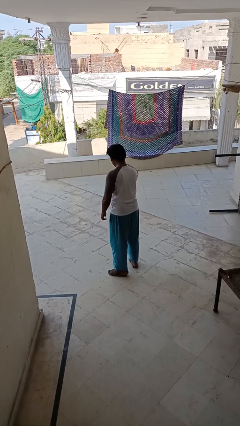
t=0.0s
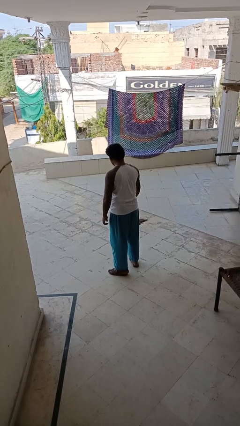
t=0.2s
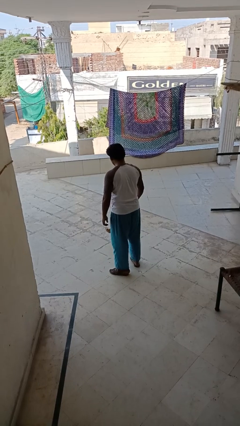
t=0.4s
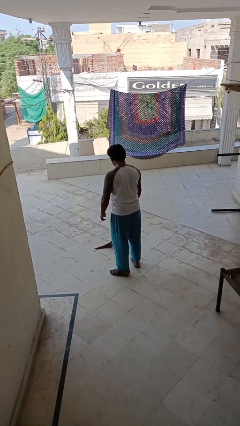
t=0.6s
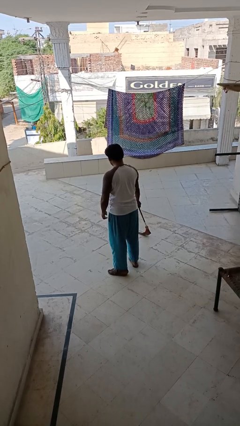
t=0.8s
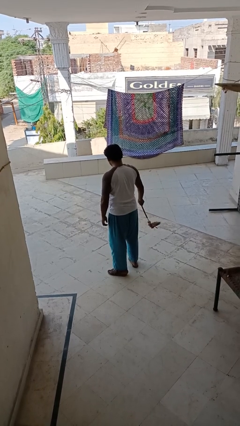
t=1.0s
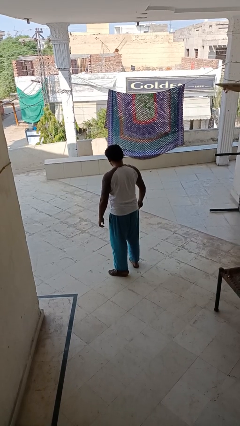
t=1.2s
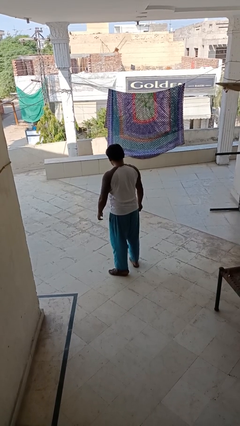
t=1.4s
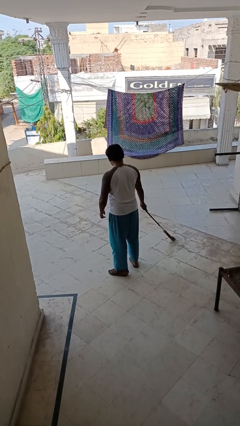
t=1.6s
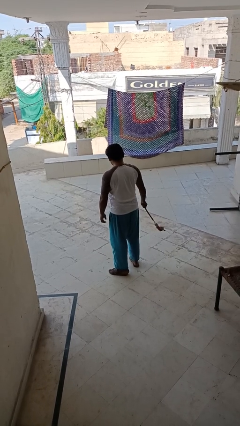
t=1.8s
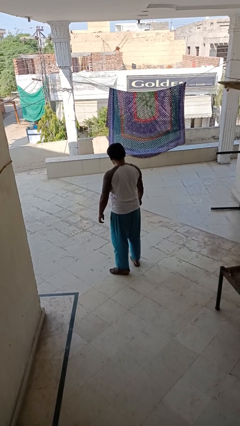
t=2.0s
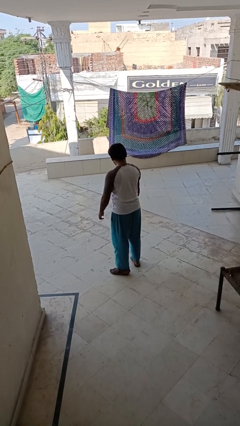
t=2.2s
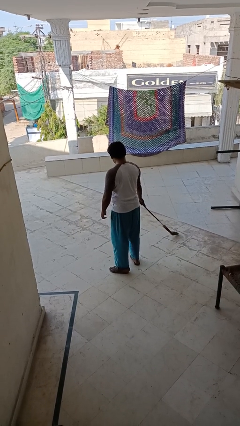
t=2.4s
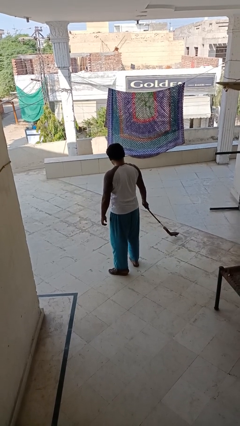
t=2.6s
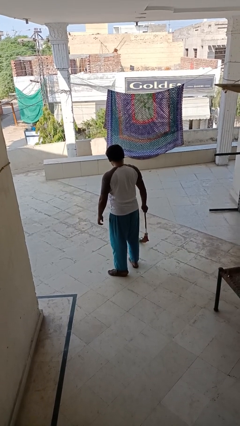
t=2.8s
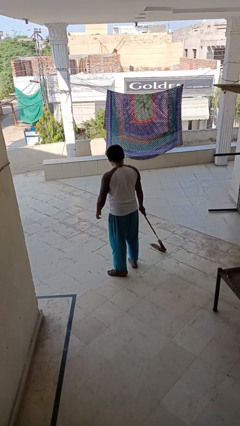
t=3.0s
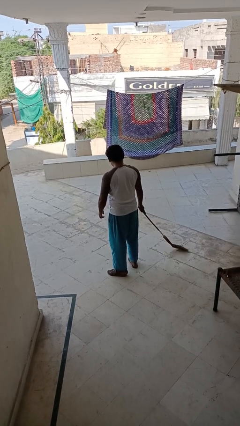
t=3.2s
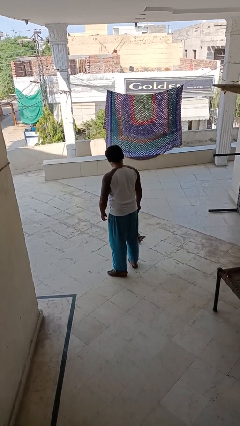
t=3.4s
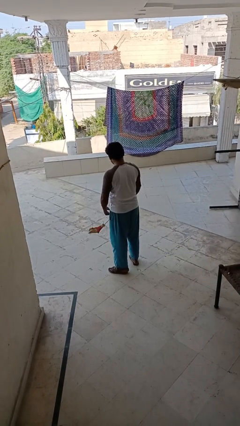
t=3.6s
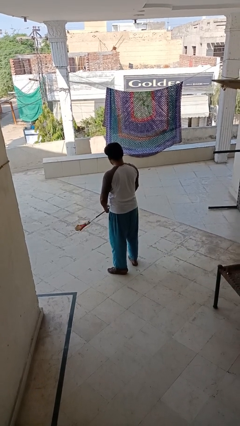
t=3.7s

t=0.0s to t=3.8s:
person sweeps floor

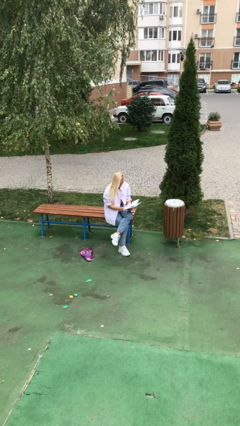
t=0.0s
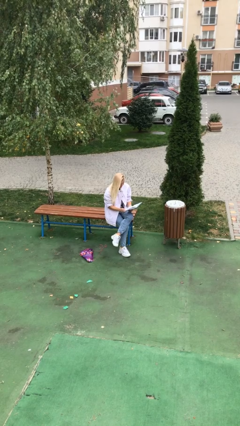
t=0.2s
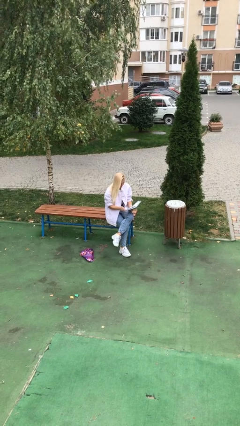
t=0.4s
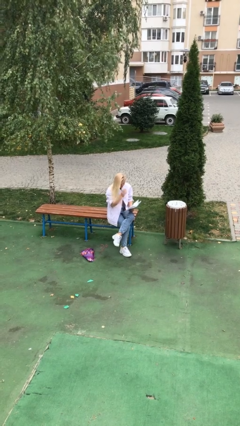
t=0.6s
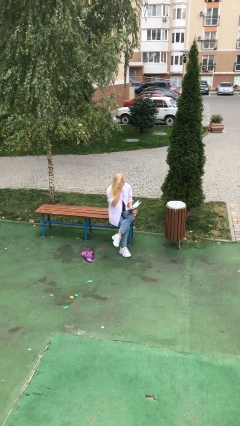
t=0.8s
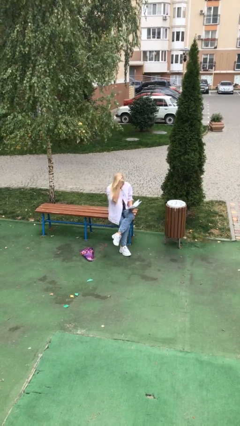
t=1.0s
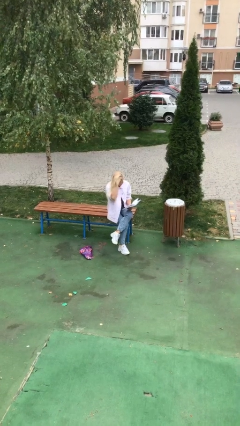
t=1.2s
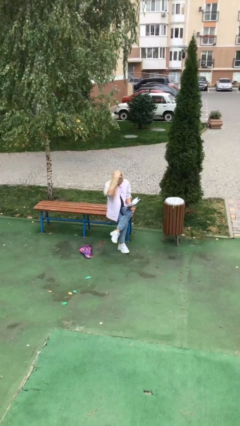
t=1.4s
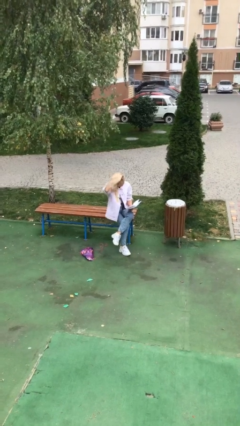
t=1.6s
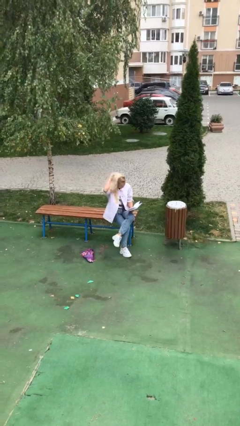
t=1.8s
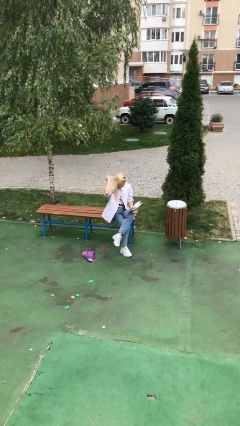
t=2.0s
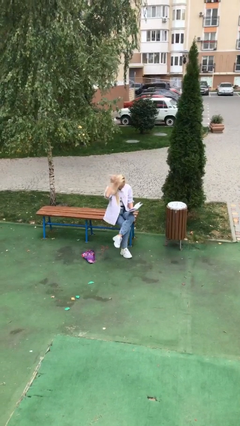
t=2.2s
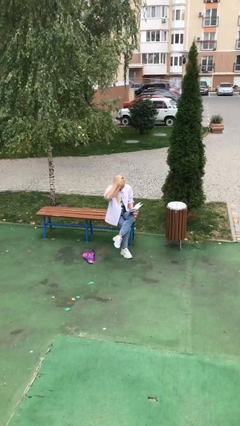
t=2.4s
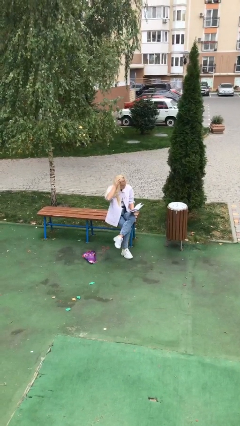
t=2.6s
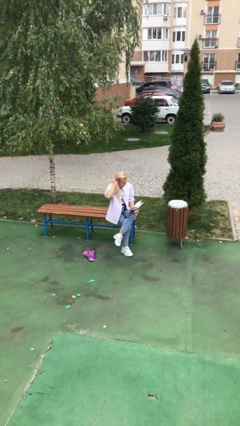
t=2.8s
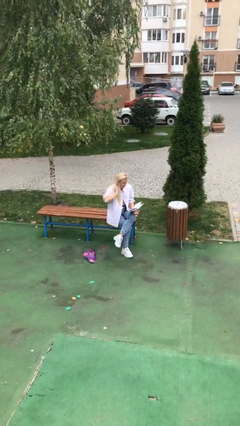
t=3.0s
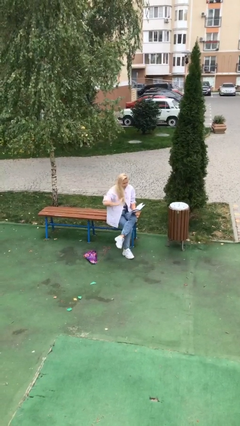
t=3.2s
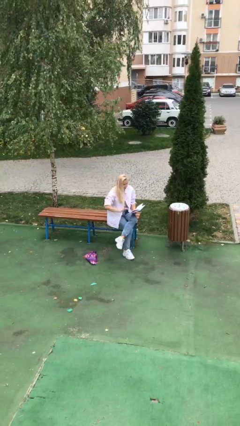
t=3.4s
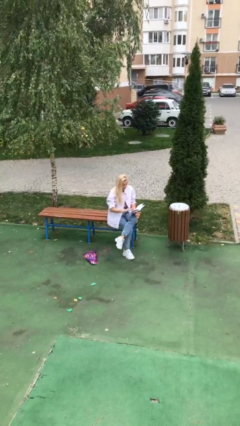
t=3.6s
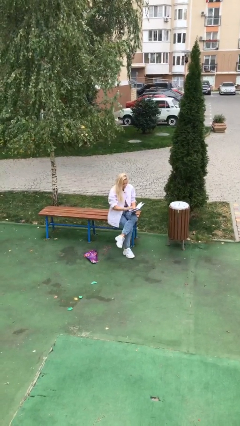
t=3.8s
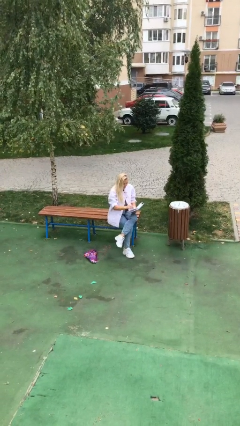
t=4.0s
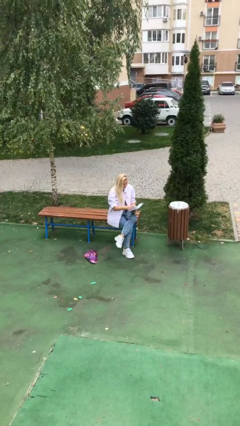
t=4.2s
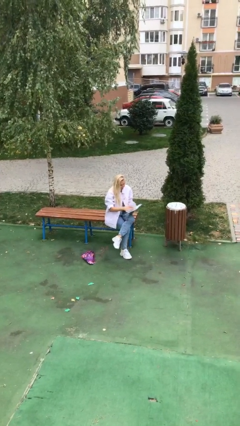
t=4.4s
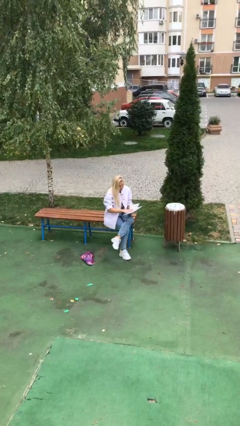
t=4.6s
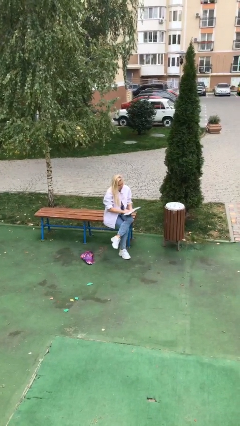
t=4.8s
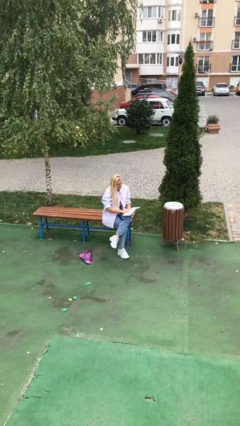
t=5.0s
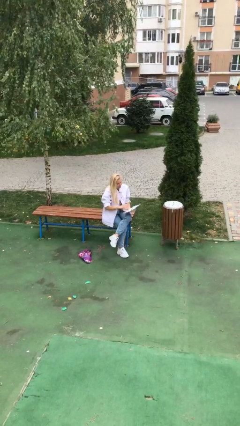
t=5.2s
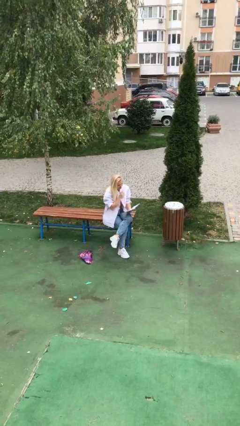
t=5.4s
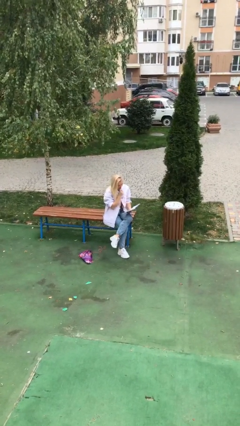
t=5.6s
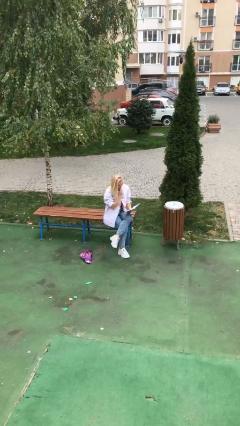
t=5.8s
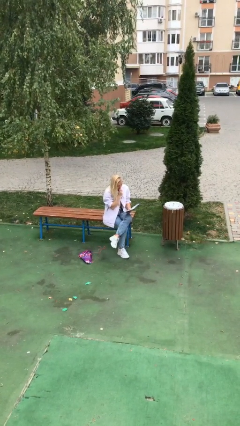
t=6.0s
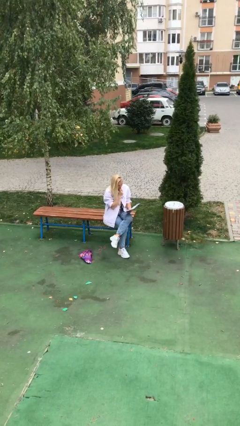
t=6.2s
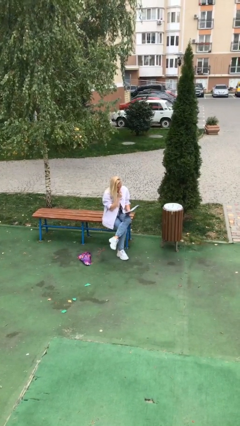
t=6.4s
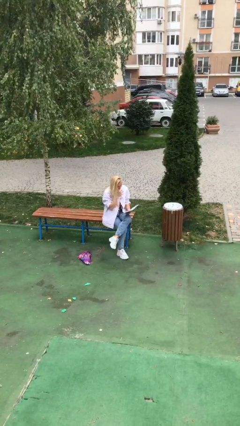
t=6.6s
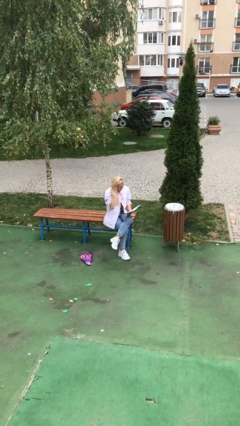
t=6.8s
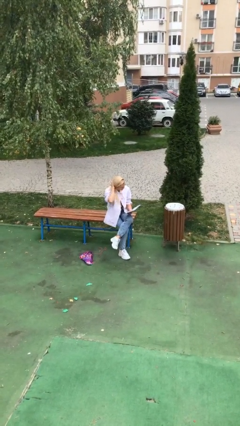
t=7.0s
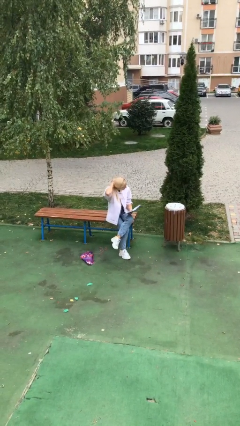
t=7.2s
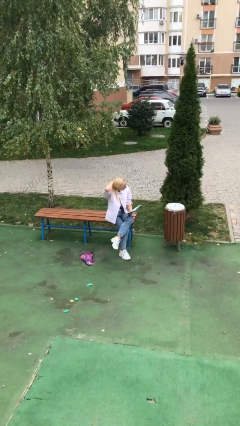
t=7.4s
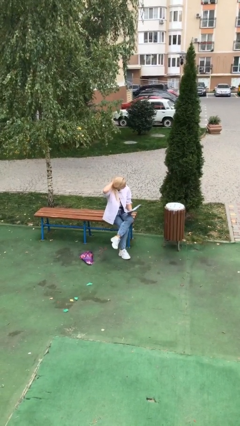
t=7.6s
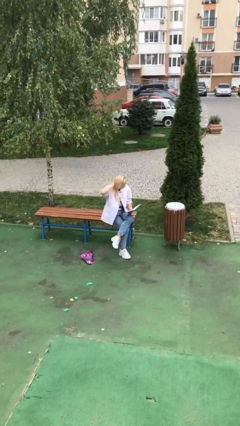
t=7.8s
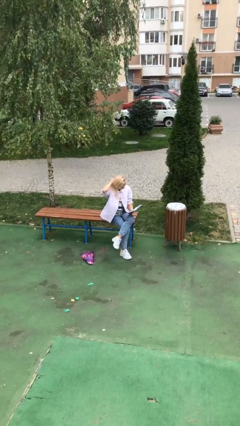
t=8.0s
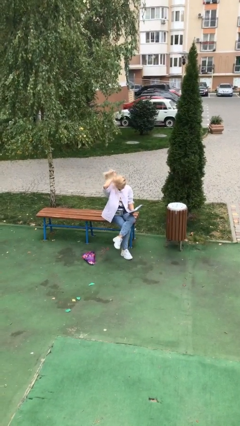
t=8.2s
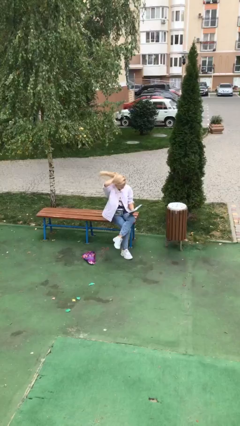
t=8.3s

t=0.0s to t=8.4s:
person reads document

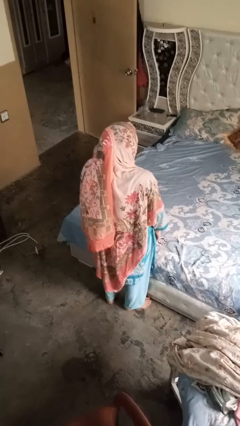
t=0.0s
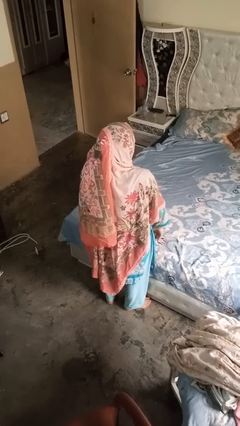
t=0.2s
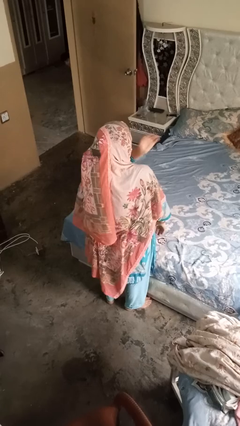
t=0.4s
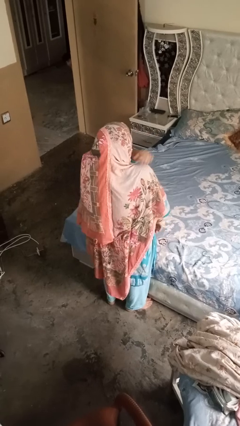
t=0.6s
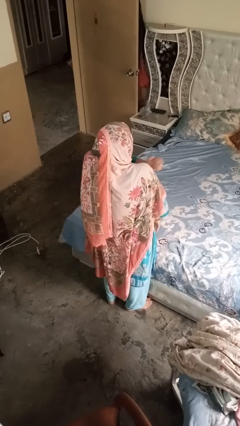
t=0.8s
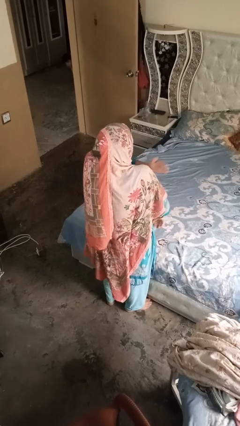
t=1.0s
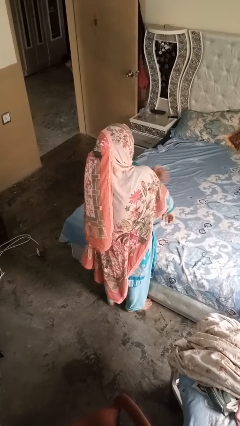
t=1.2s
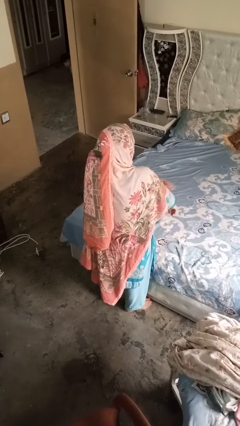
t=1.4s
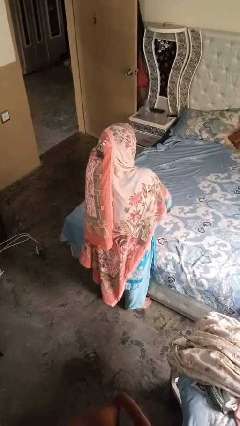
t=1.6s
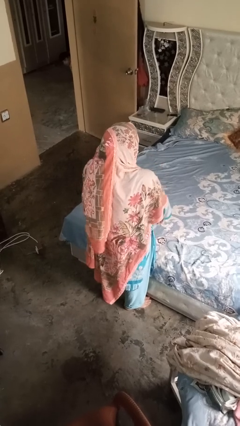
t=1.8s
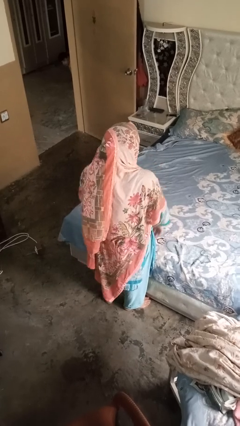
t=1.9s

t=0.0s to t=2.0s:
person swats bug

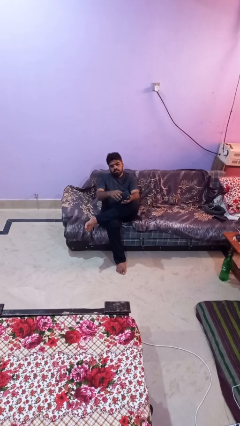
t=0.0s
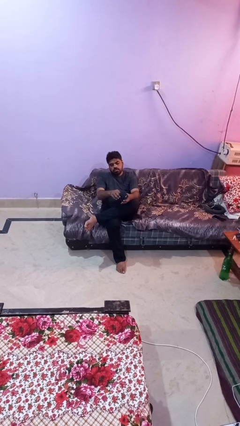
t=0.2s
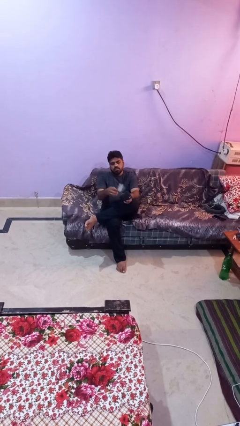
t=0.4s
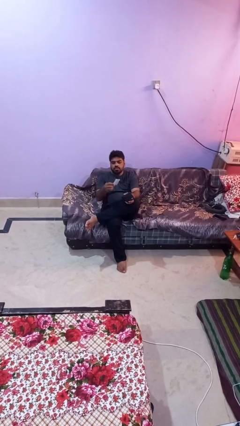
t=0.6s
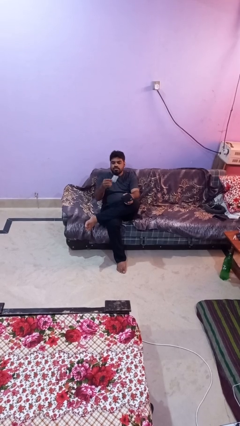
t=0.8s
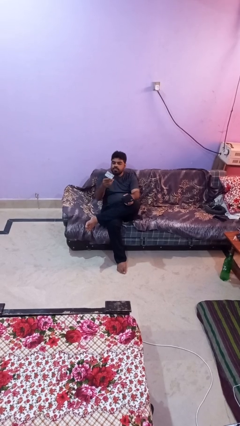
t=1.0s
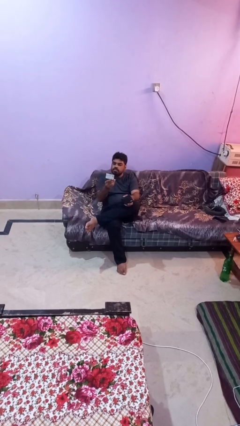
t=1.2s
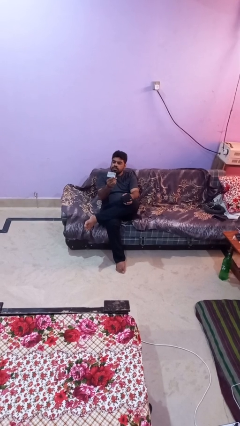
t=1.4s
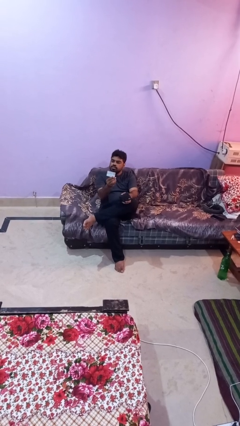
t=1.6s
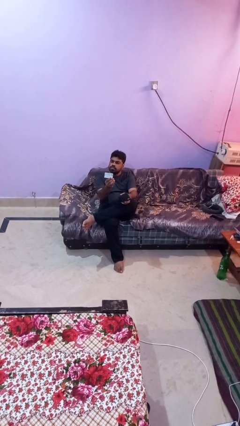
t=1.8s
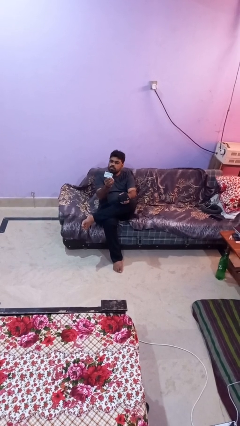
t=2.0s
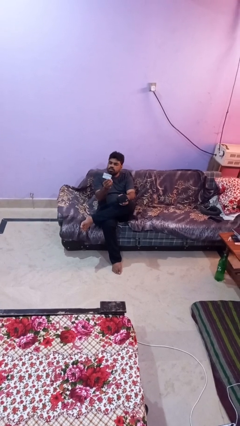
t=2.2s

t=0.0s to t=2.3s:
person takes object from purse

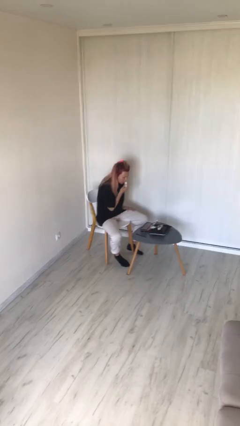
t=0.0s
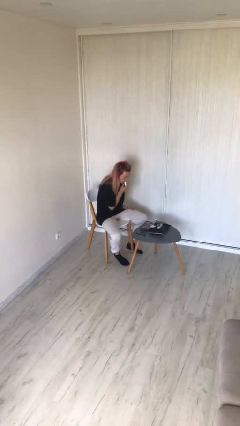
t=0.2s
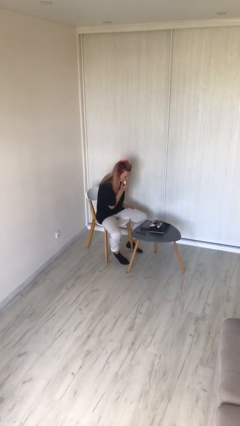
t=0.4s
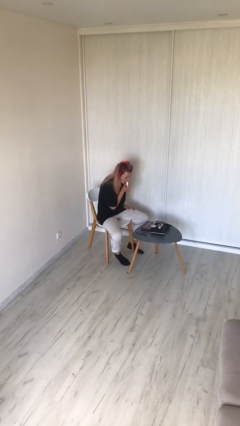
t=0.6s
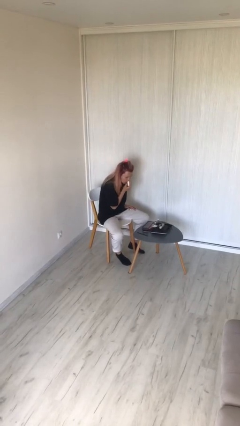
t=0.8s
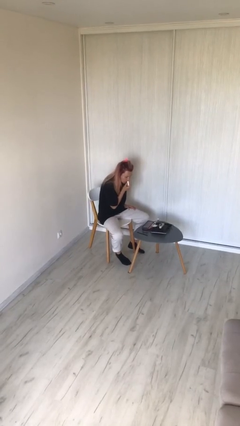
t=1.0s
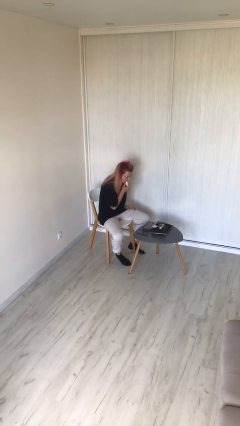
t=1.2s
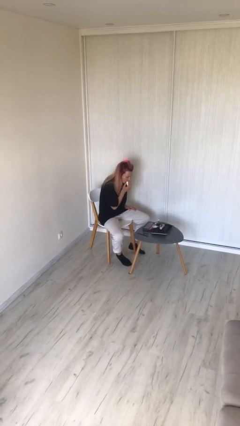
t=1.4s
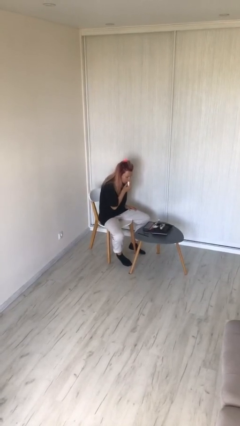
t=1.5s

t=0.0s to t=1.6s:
person applies lip makeup
